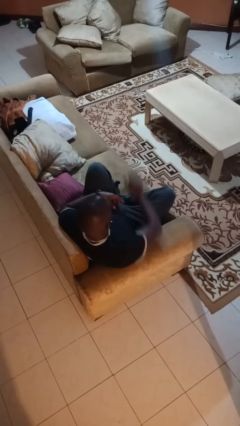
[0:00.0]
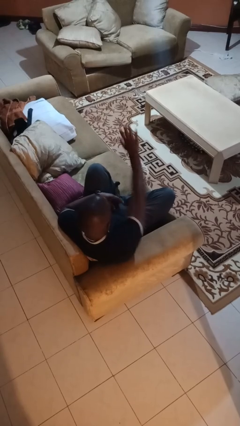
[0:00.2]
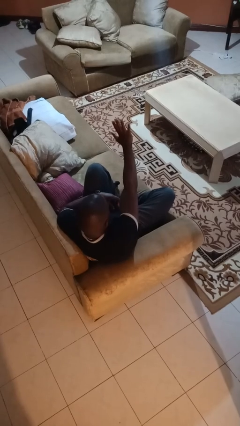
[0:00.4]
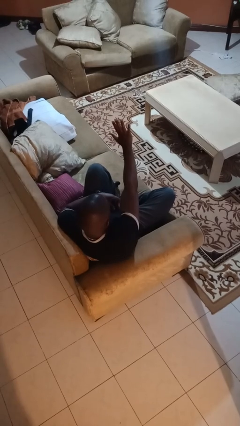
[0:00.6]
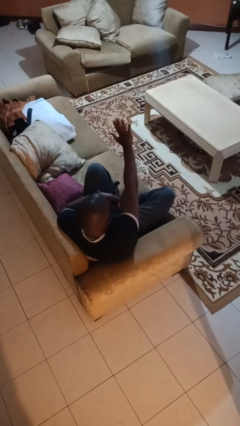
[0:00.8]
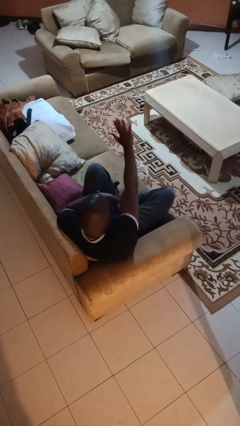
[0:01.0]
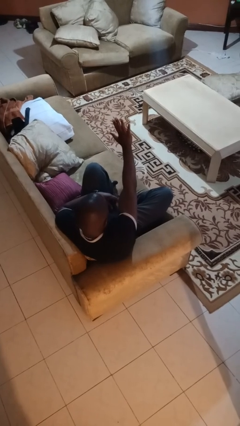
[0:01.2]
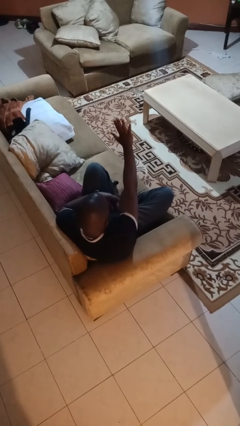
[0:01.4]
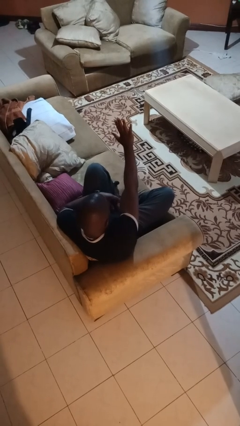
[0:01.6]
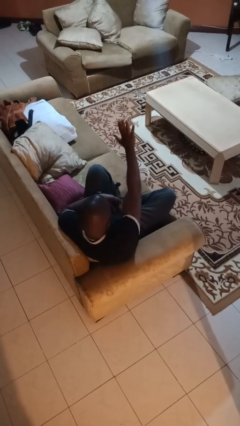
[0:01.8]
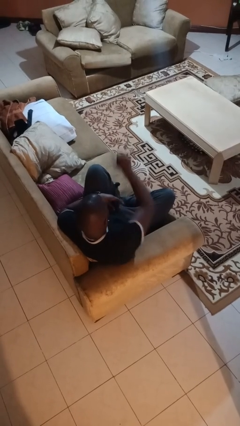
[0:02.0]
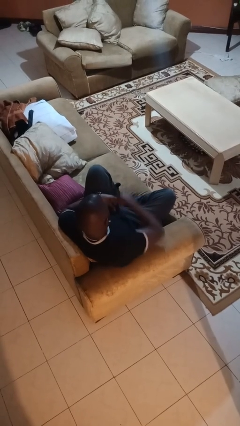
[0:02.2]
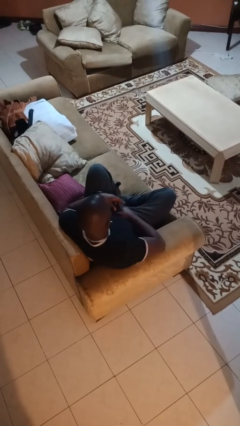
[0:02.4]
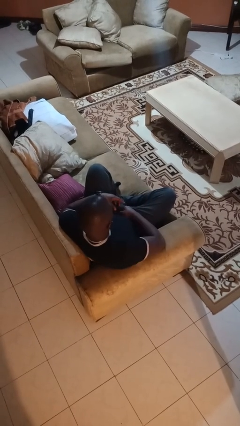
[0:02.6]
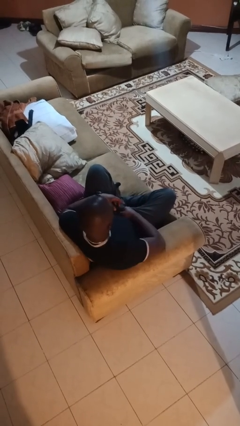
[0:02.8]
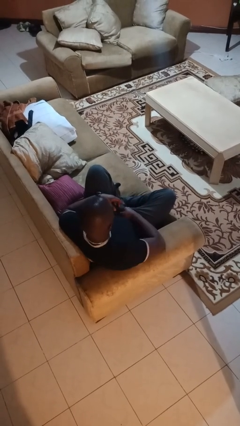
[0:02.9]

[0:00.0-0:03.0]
person gestures stop

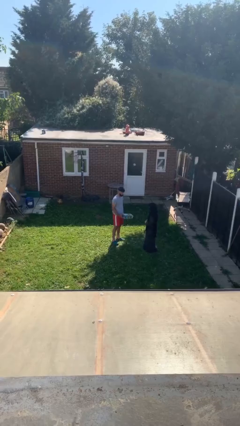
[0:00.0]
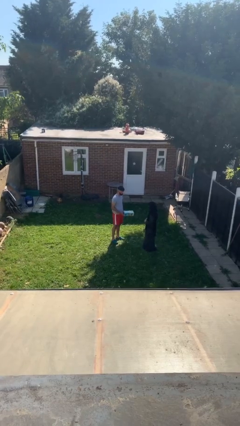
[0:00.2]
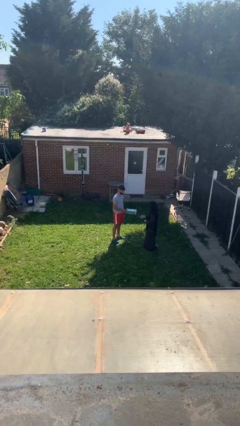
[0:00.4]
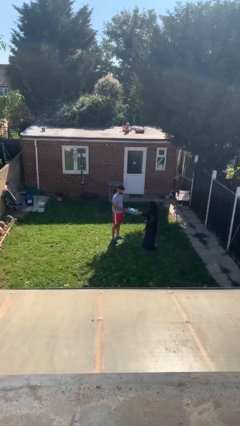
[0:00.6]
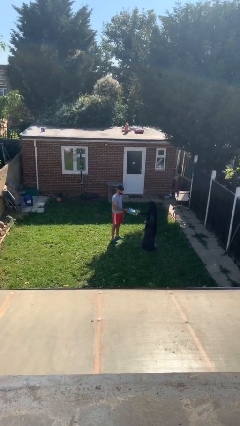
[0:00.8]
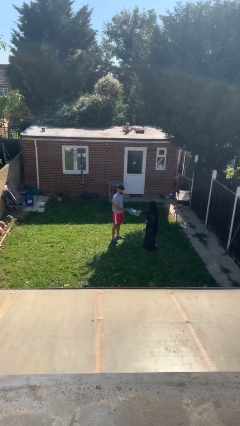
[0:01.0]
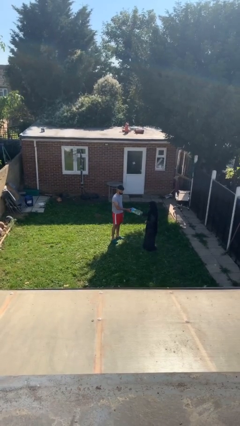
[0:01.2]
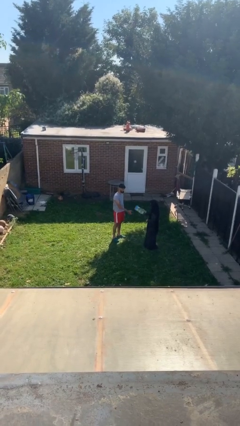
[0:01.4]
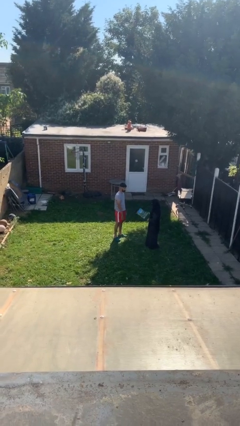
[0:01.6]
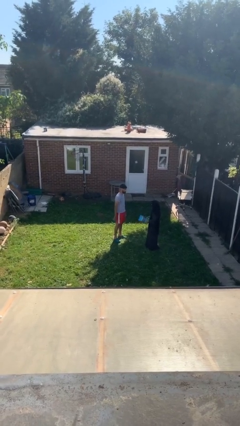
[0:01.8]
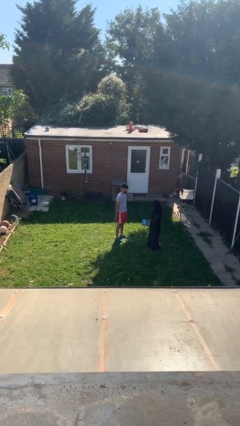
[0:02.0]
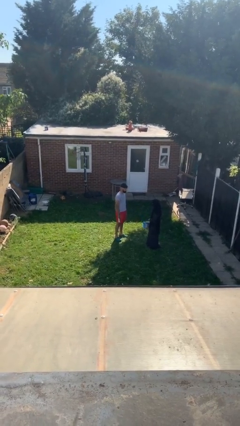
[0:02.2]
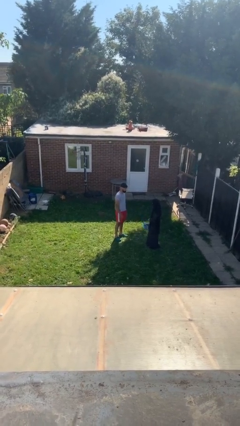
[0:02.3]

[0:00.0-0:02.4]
person transfers object to person

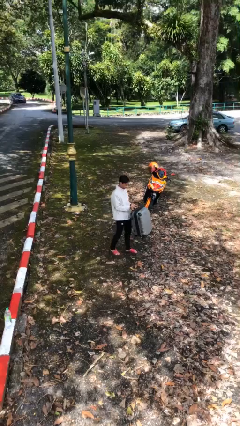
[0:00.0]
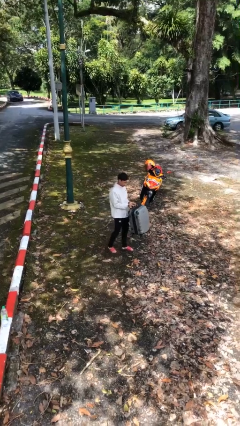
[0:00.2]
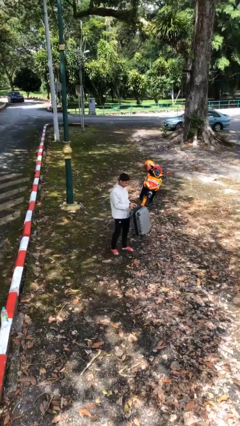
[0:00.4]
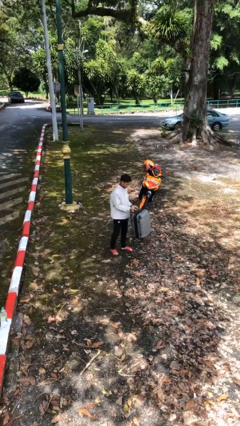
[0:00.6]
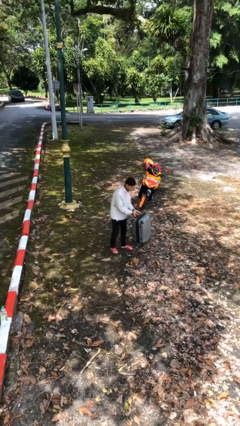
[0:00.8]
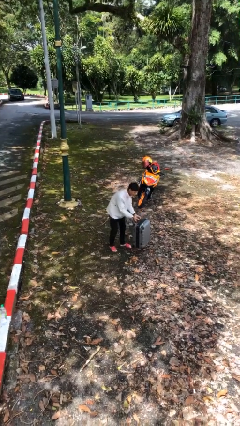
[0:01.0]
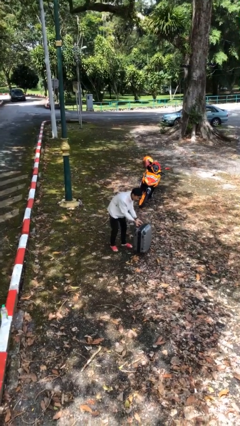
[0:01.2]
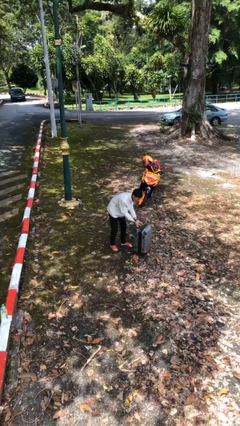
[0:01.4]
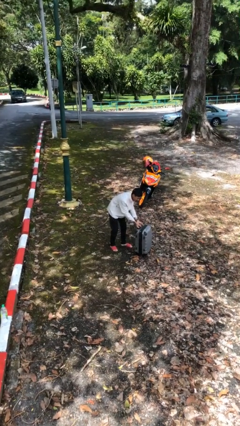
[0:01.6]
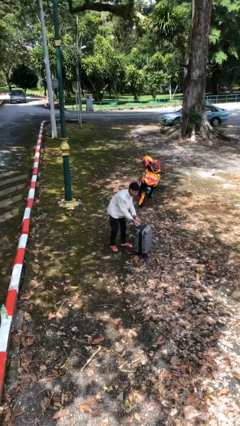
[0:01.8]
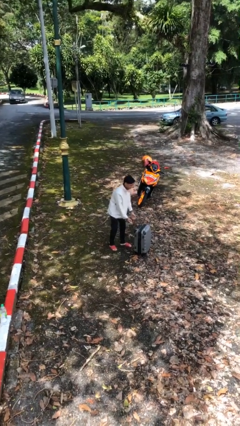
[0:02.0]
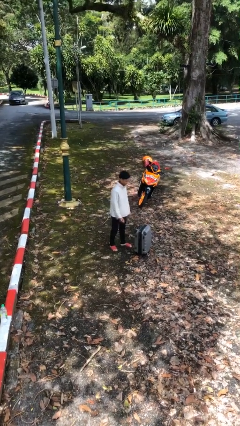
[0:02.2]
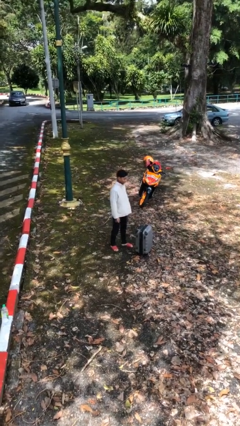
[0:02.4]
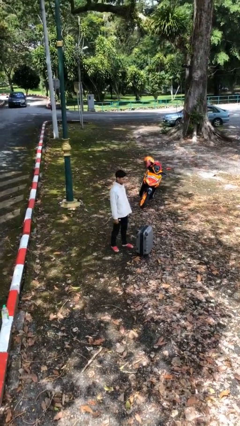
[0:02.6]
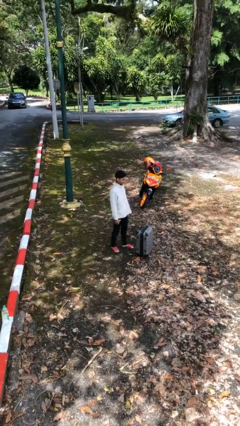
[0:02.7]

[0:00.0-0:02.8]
person puts down object on floor

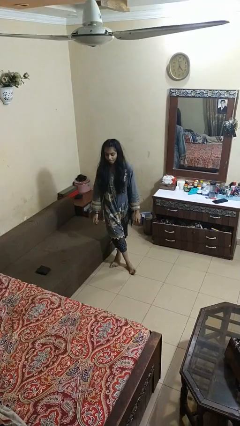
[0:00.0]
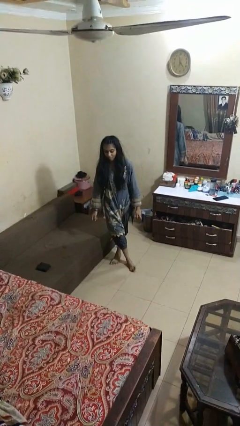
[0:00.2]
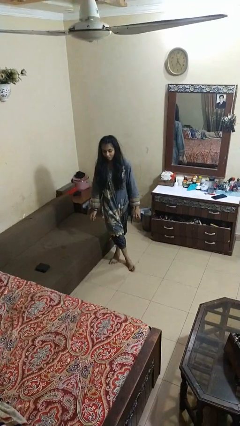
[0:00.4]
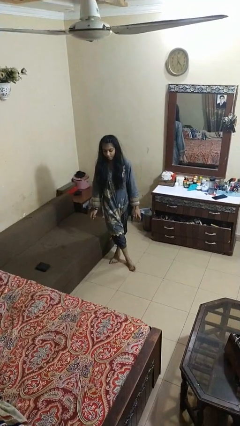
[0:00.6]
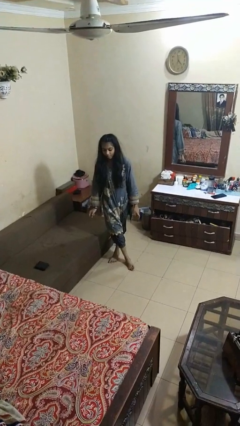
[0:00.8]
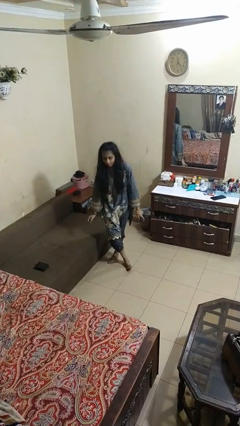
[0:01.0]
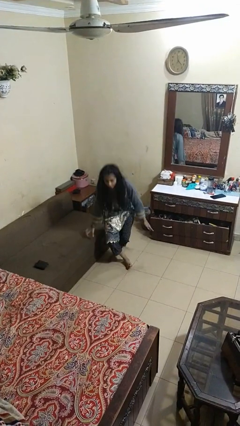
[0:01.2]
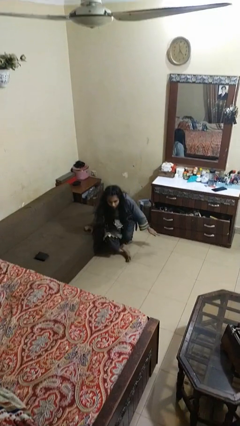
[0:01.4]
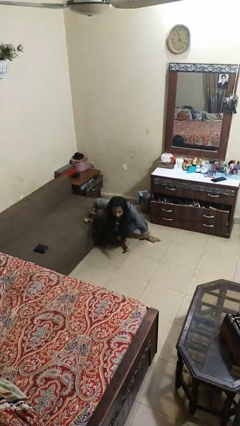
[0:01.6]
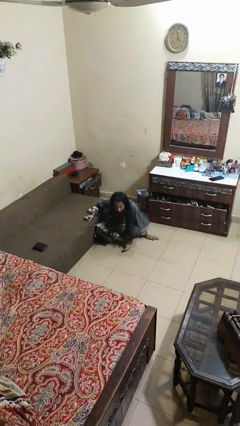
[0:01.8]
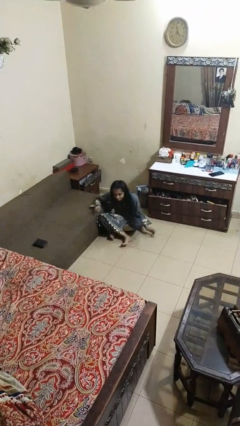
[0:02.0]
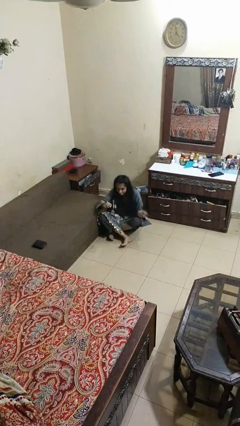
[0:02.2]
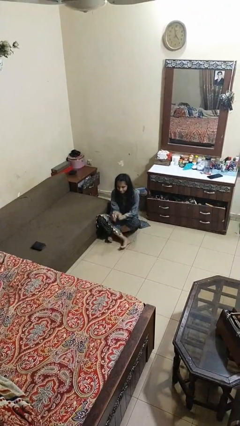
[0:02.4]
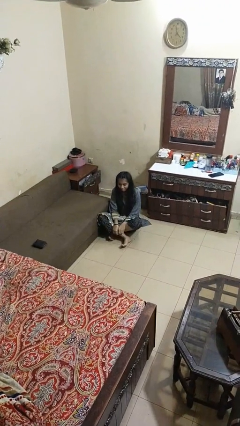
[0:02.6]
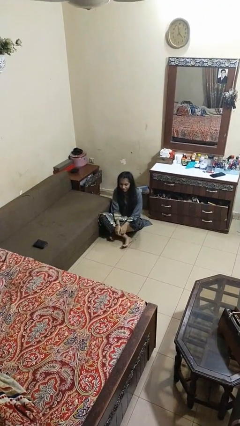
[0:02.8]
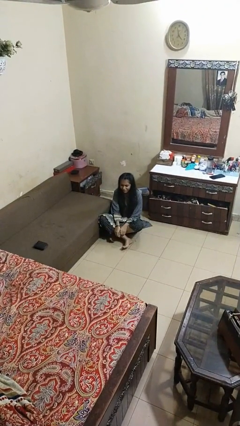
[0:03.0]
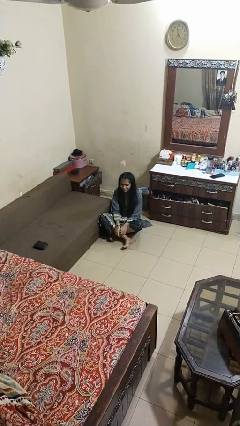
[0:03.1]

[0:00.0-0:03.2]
person sits crisscross

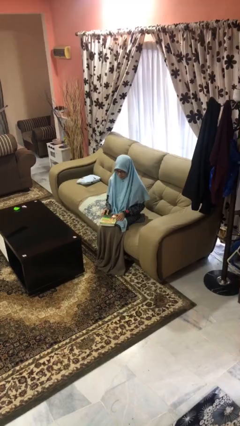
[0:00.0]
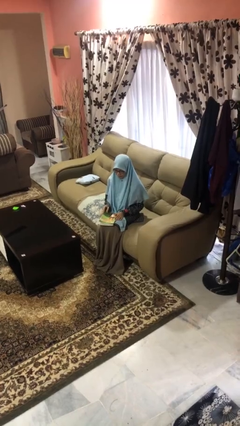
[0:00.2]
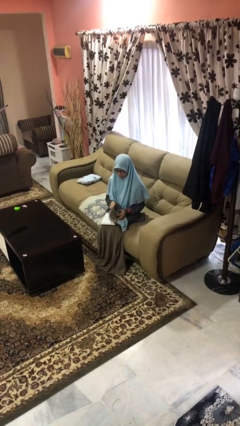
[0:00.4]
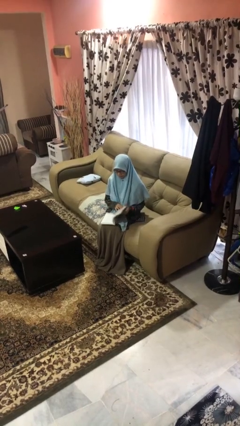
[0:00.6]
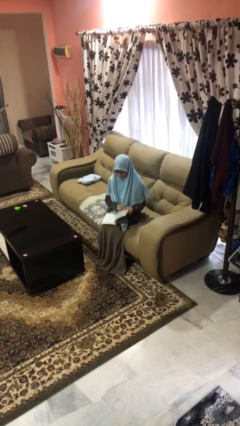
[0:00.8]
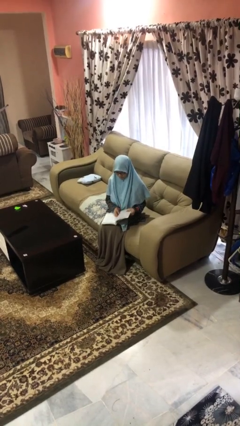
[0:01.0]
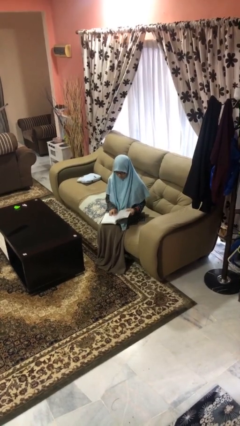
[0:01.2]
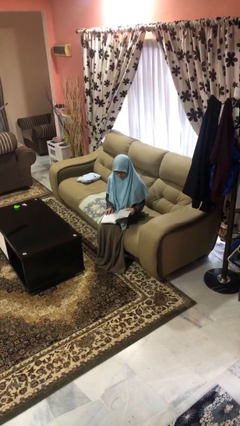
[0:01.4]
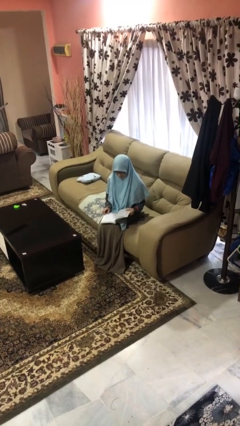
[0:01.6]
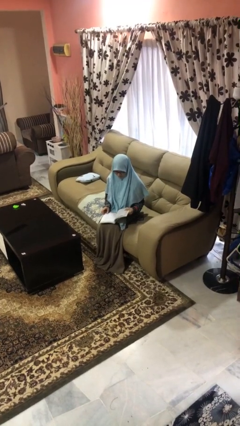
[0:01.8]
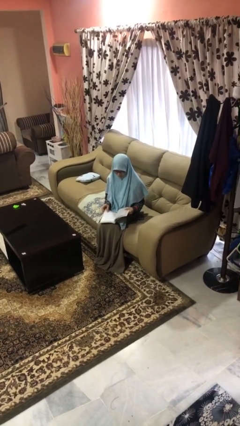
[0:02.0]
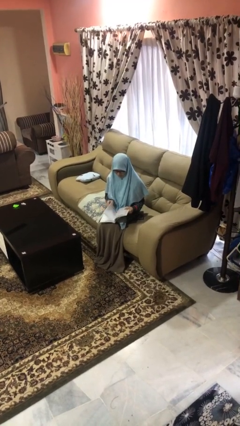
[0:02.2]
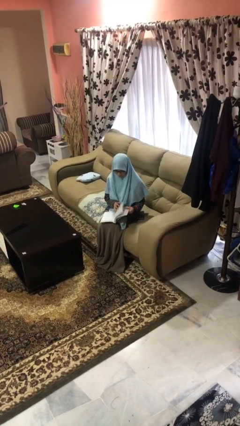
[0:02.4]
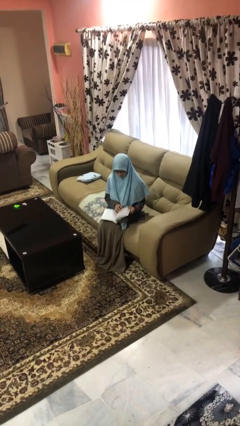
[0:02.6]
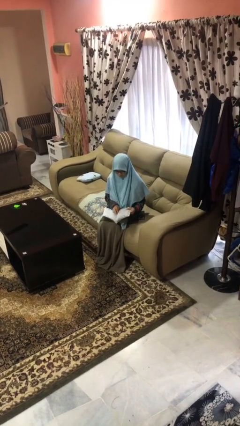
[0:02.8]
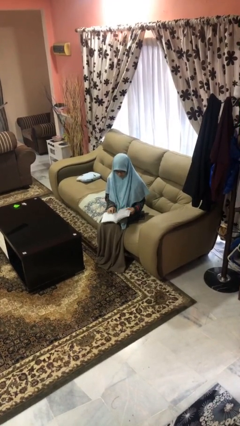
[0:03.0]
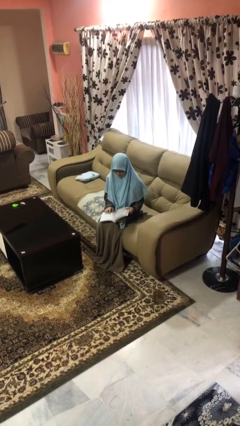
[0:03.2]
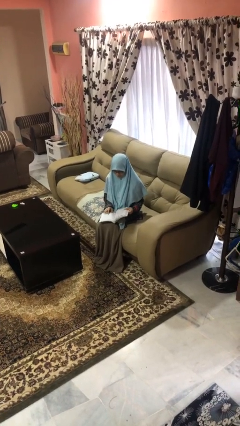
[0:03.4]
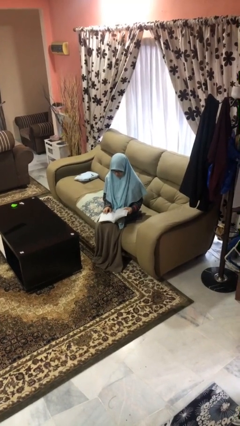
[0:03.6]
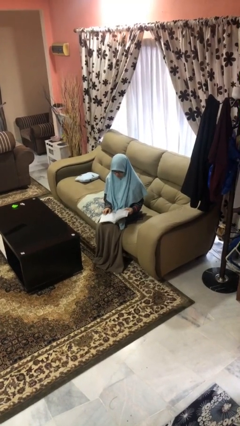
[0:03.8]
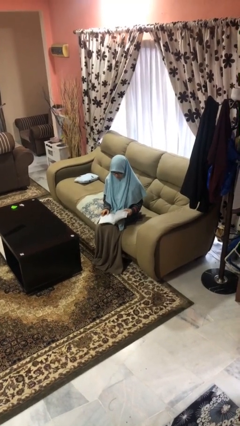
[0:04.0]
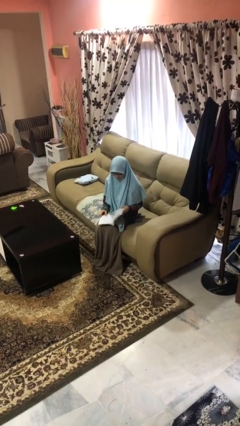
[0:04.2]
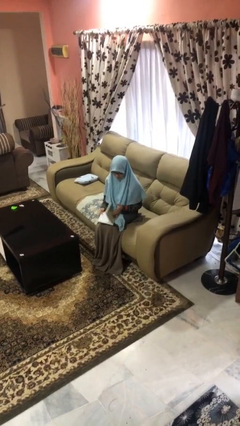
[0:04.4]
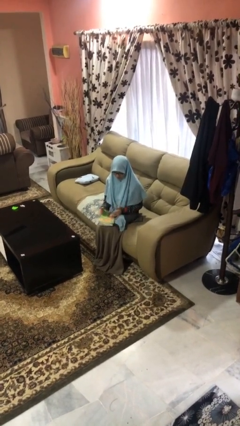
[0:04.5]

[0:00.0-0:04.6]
person reads book

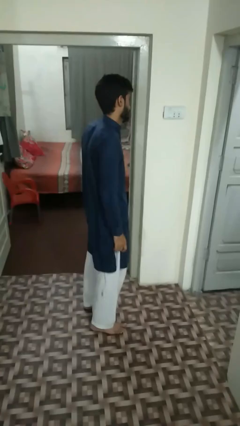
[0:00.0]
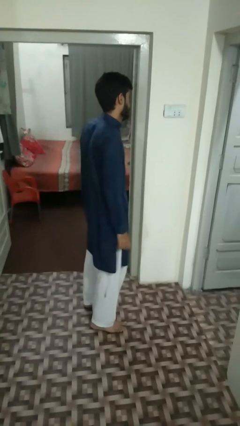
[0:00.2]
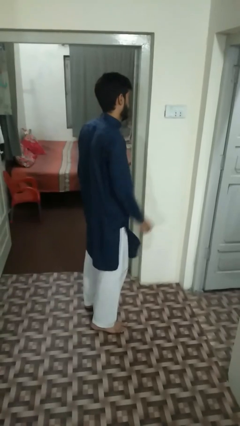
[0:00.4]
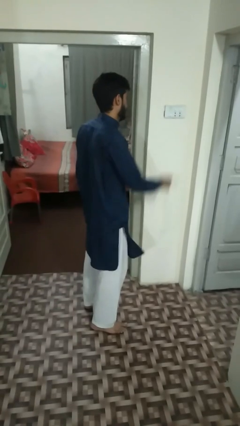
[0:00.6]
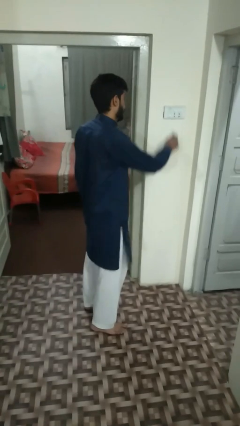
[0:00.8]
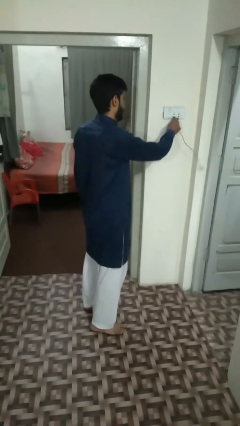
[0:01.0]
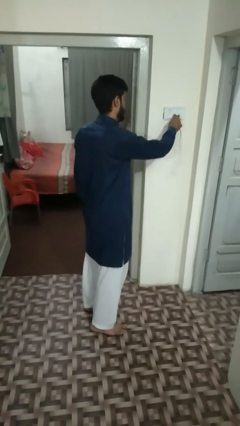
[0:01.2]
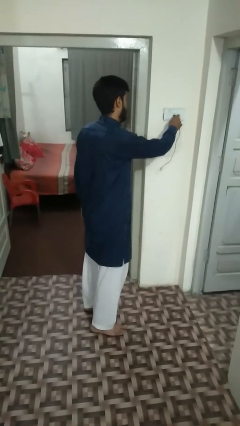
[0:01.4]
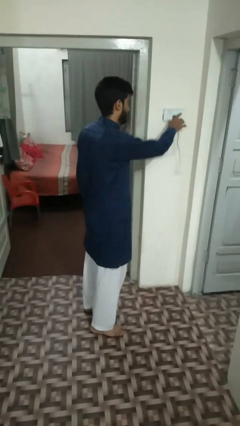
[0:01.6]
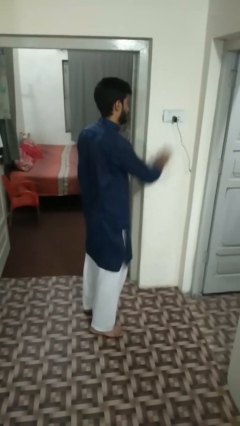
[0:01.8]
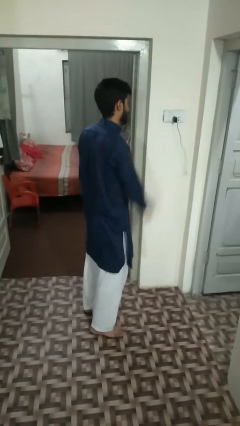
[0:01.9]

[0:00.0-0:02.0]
person plugs into electrical socket
